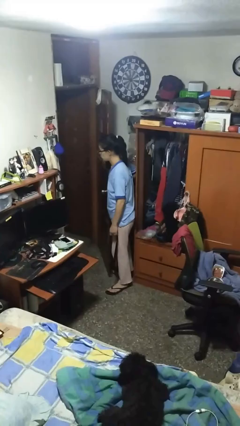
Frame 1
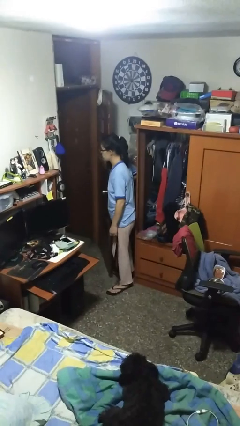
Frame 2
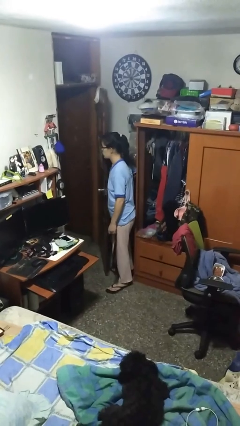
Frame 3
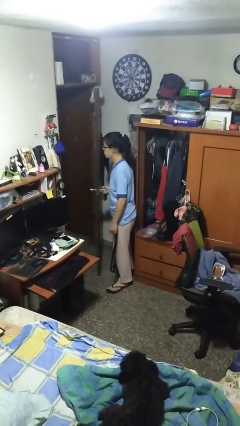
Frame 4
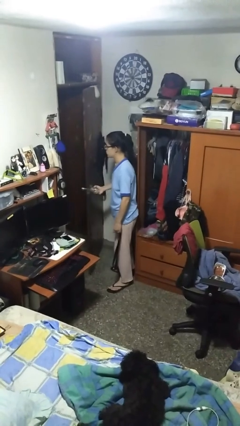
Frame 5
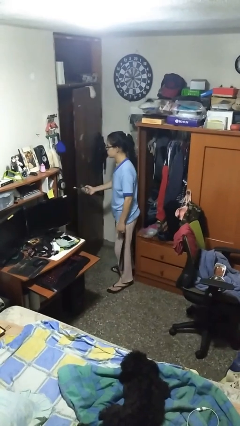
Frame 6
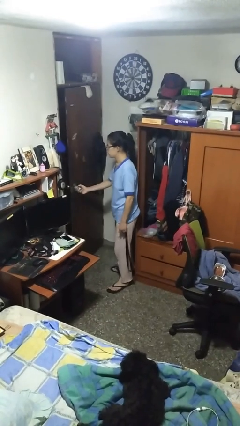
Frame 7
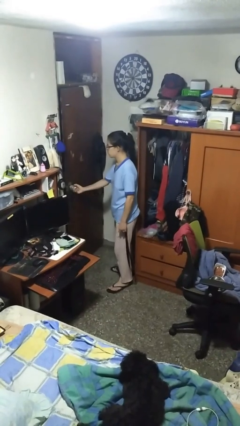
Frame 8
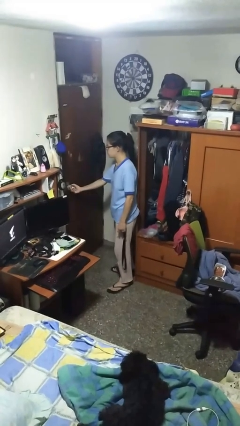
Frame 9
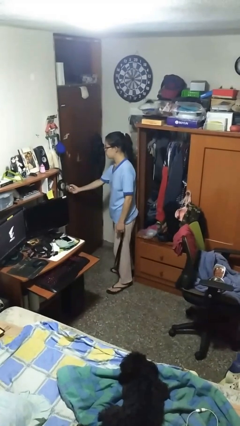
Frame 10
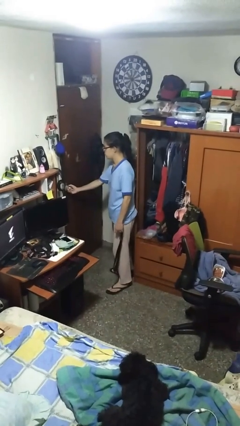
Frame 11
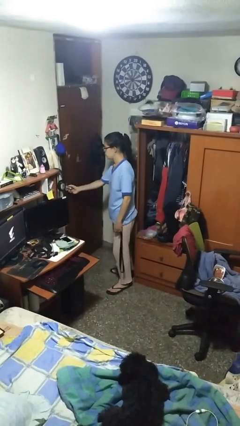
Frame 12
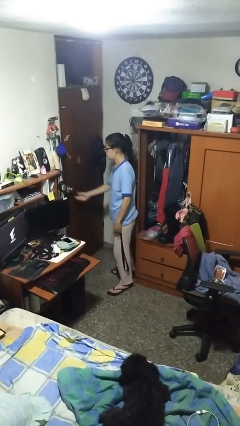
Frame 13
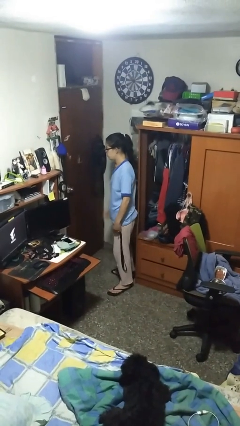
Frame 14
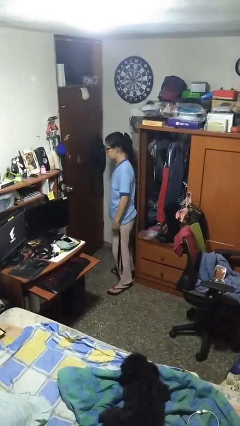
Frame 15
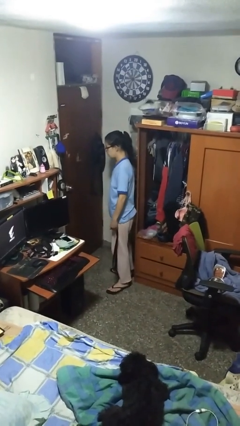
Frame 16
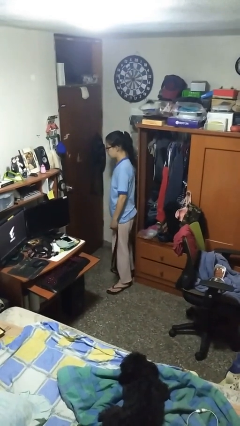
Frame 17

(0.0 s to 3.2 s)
person closes facility door

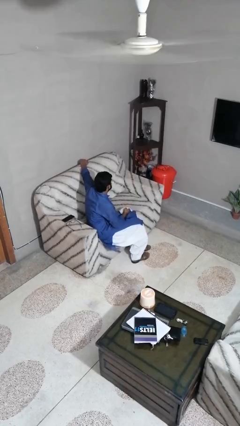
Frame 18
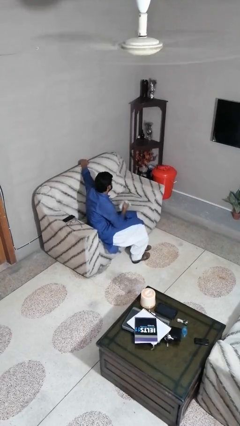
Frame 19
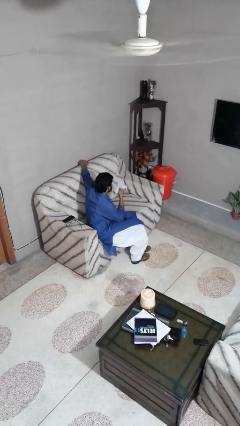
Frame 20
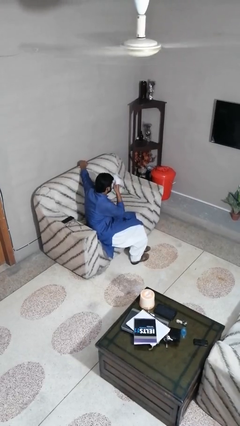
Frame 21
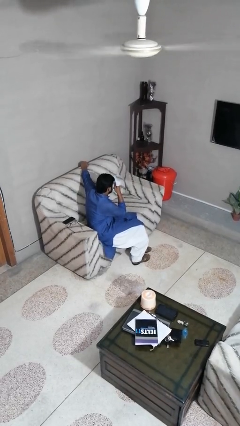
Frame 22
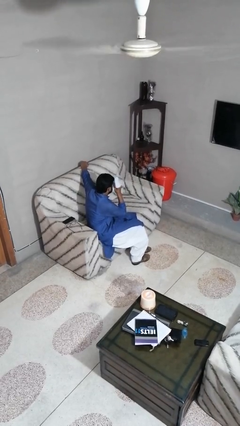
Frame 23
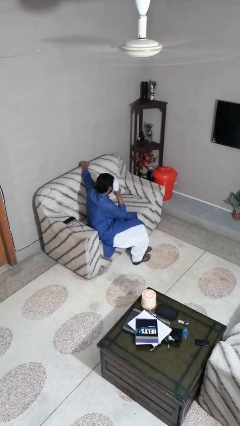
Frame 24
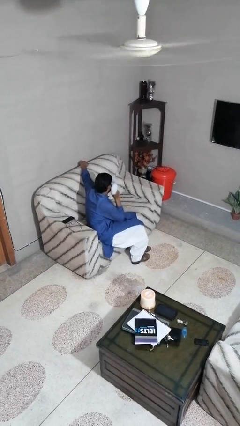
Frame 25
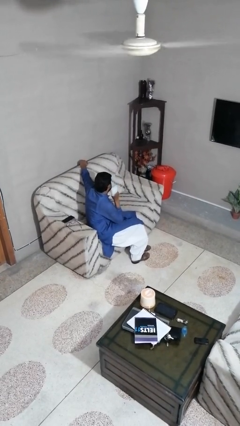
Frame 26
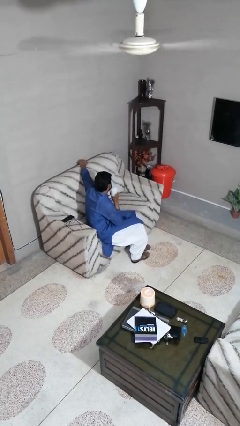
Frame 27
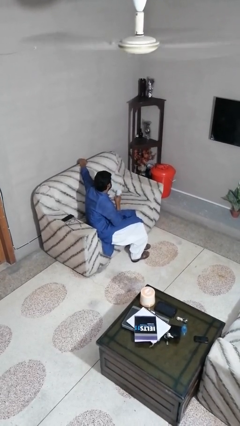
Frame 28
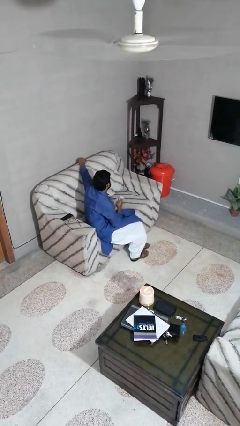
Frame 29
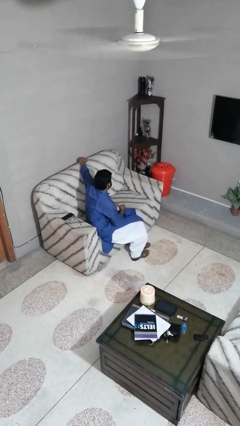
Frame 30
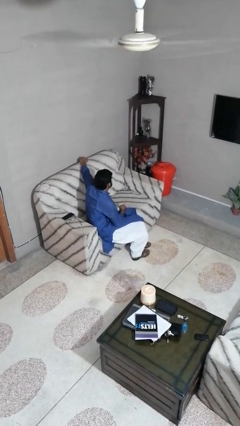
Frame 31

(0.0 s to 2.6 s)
person wipes mouth with napkin

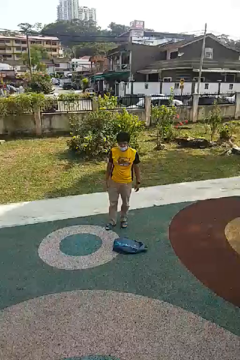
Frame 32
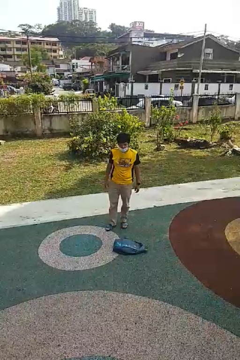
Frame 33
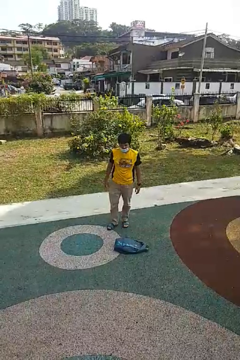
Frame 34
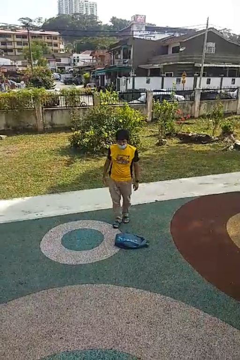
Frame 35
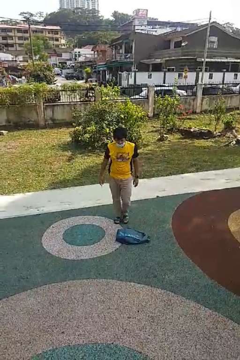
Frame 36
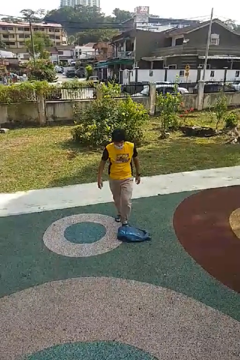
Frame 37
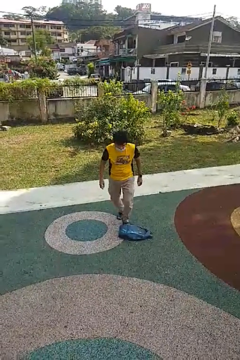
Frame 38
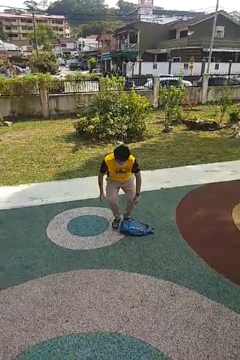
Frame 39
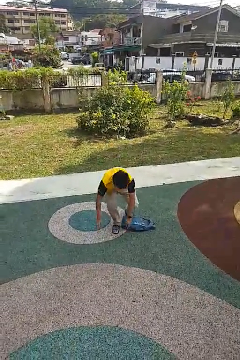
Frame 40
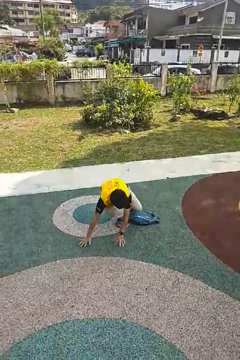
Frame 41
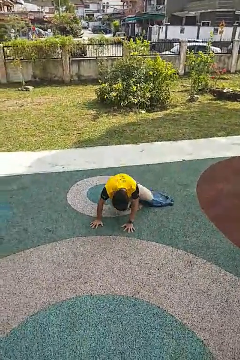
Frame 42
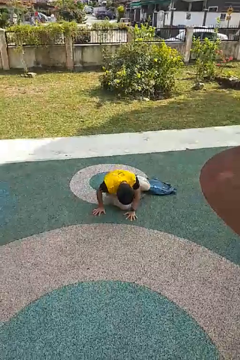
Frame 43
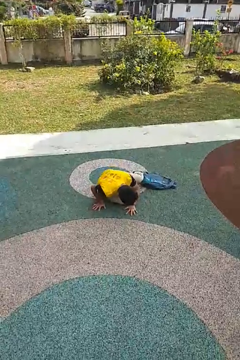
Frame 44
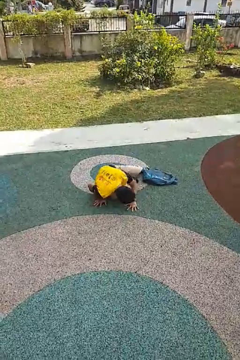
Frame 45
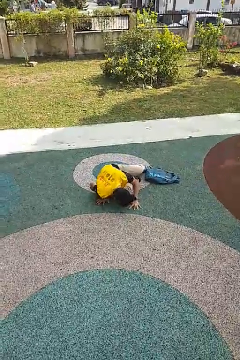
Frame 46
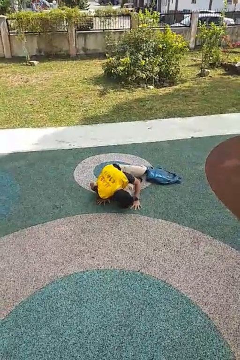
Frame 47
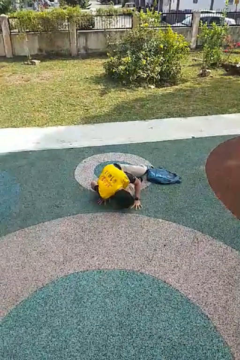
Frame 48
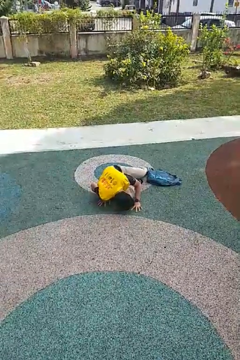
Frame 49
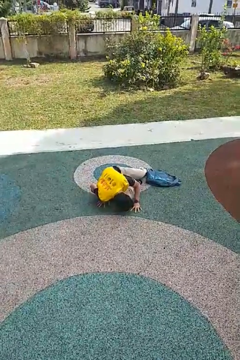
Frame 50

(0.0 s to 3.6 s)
person trips on object on floor

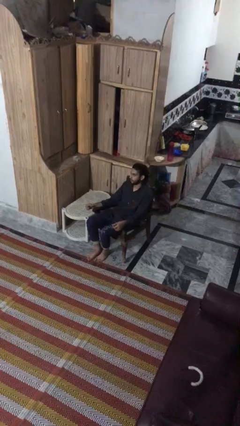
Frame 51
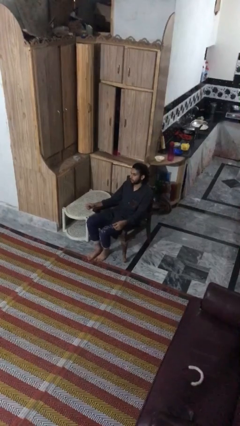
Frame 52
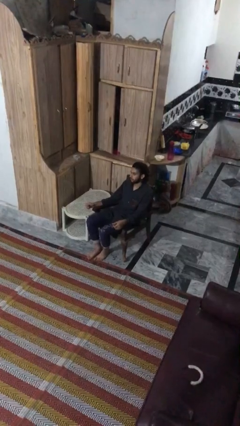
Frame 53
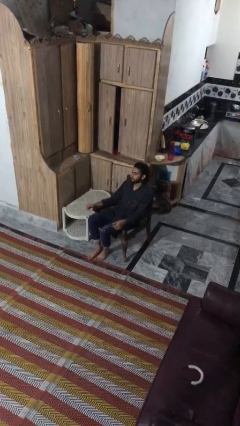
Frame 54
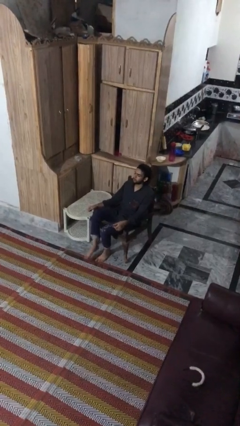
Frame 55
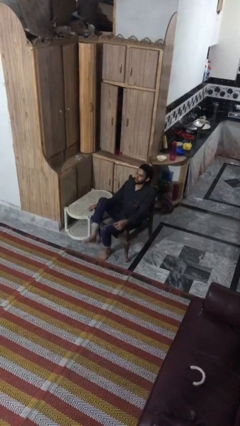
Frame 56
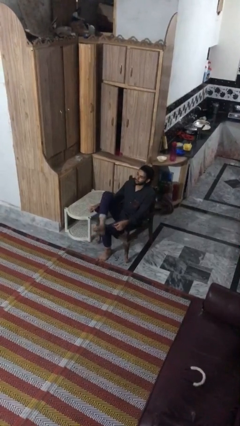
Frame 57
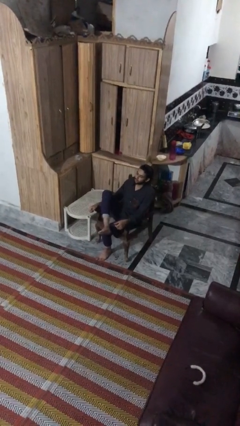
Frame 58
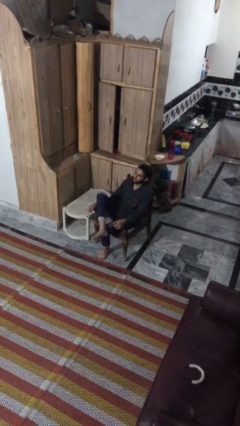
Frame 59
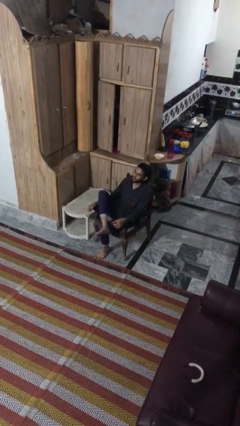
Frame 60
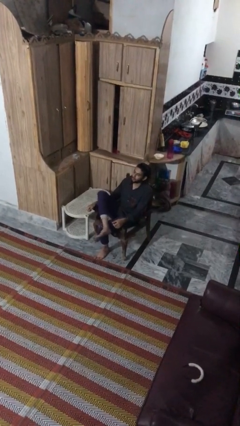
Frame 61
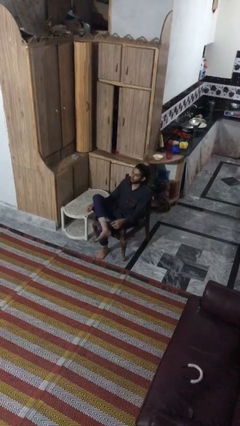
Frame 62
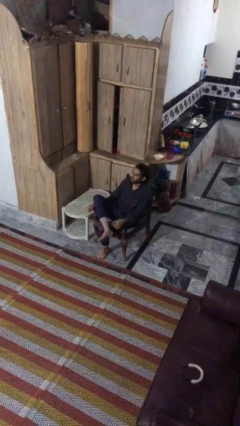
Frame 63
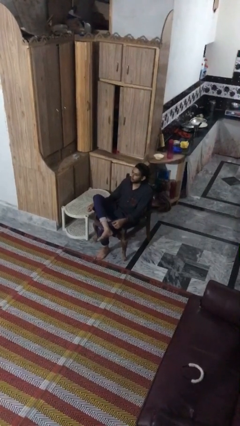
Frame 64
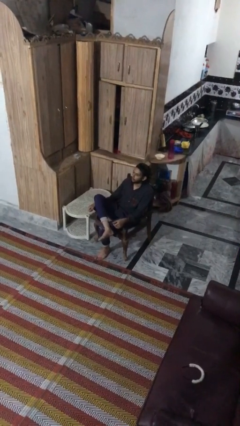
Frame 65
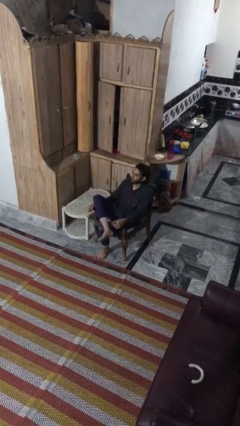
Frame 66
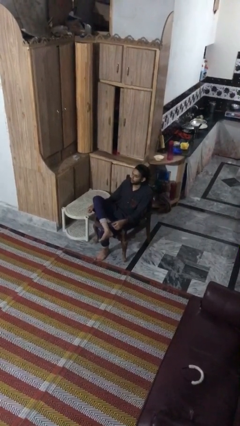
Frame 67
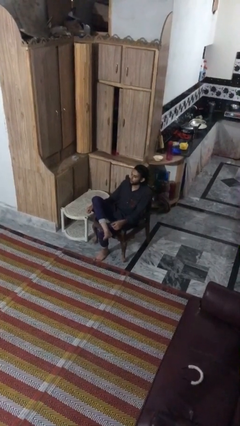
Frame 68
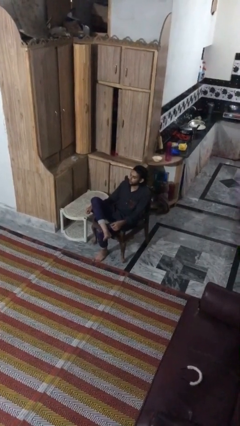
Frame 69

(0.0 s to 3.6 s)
person crosses legs

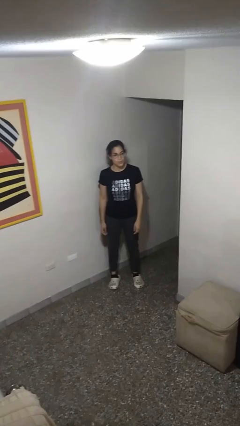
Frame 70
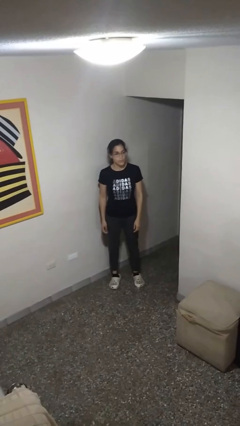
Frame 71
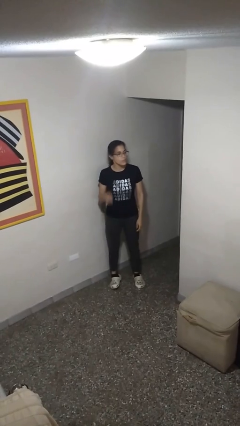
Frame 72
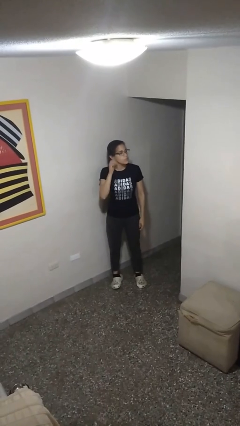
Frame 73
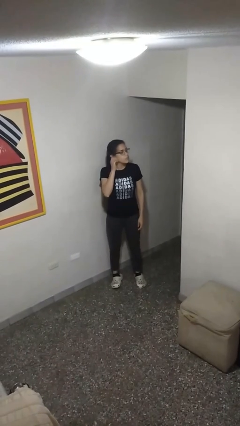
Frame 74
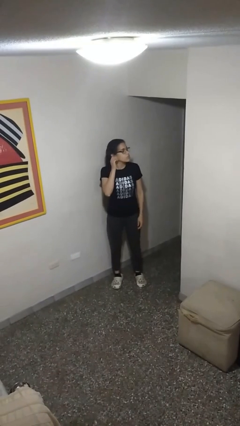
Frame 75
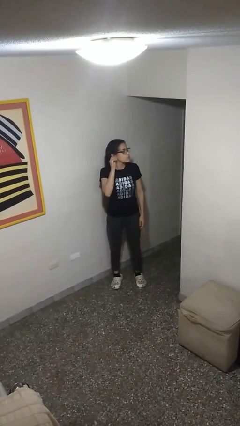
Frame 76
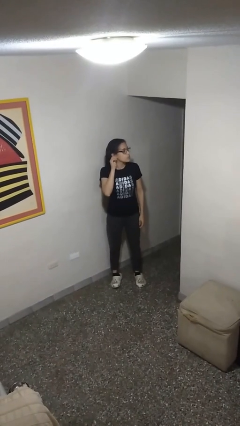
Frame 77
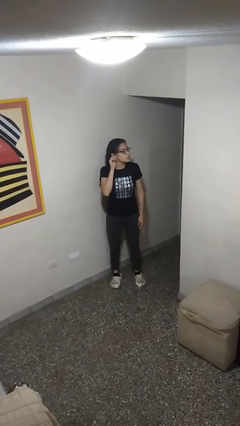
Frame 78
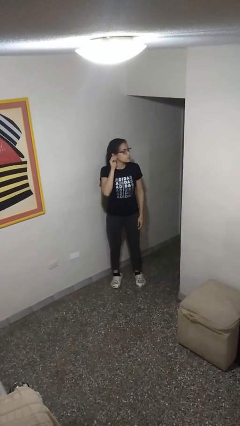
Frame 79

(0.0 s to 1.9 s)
person touches earlobe

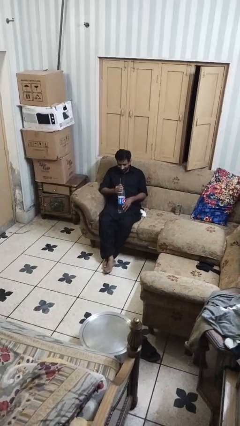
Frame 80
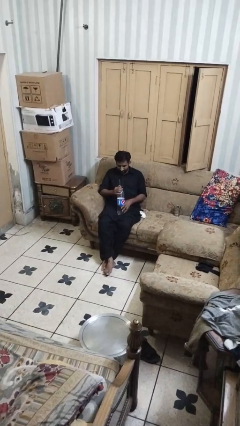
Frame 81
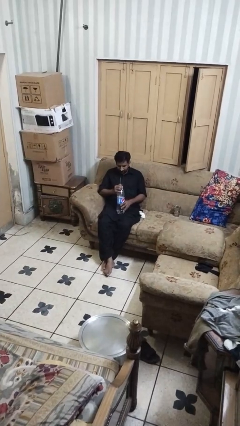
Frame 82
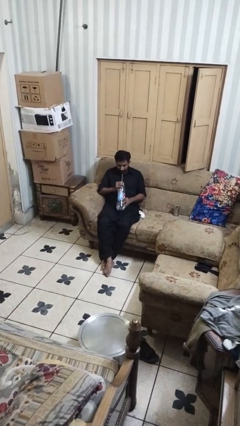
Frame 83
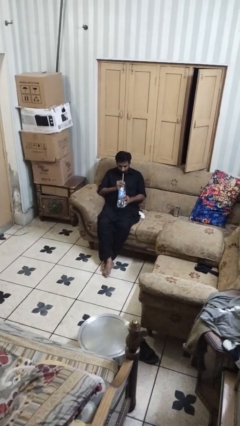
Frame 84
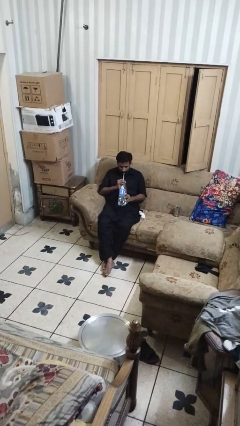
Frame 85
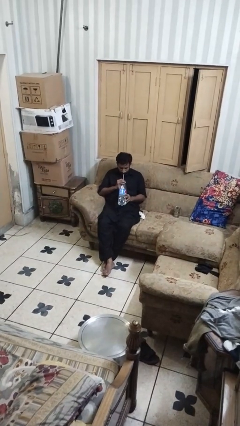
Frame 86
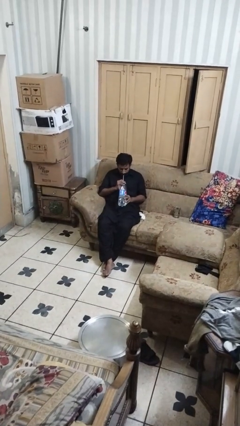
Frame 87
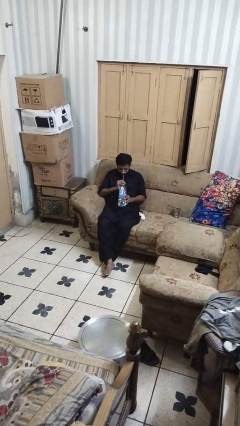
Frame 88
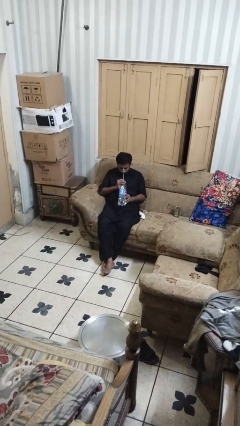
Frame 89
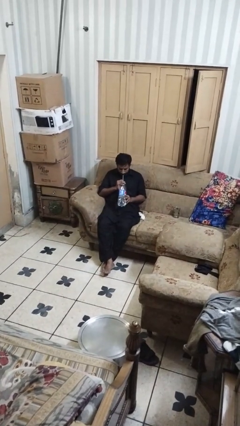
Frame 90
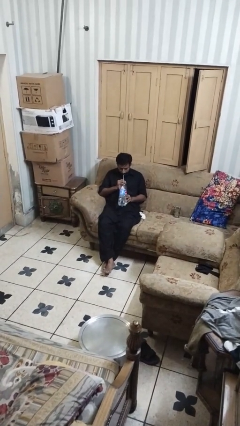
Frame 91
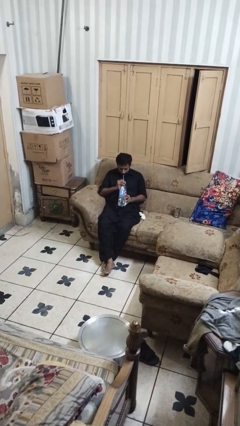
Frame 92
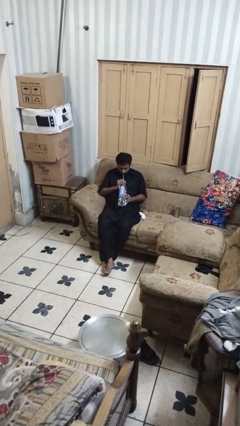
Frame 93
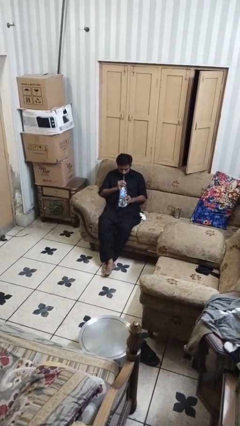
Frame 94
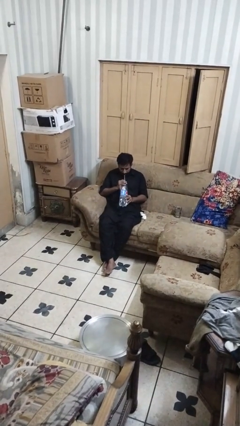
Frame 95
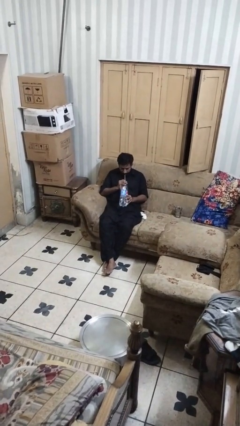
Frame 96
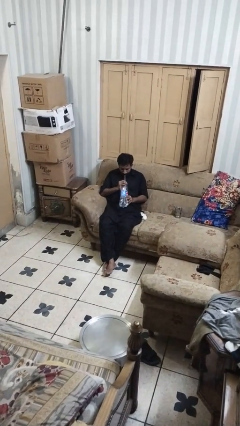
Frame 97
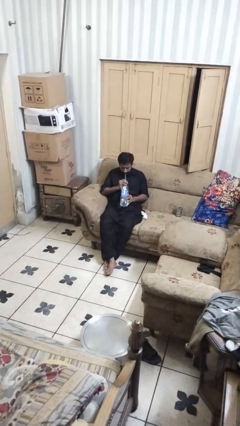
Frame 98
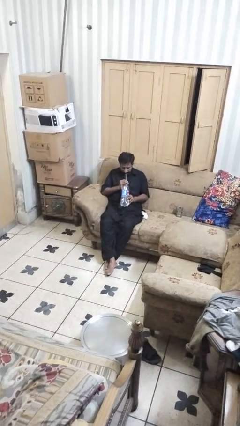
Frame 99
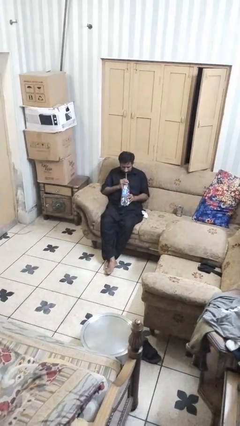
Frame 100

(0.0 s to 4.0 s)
person drinks from straw
